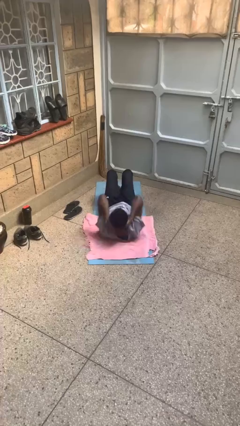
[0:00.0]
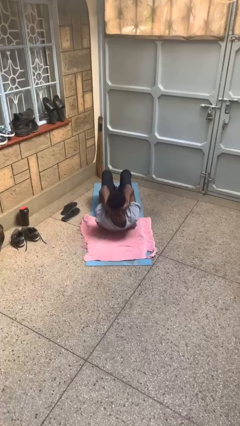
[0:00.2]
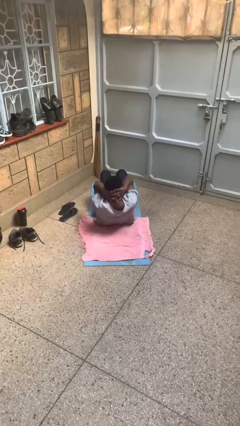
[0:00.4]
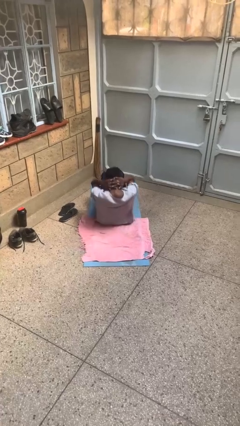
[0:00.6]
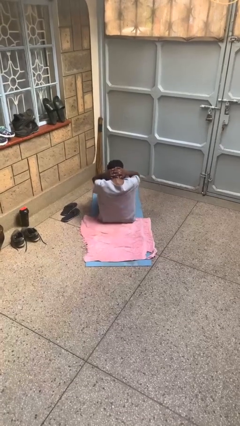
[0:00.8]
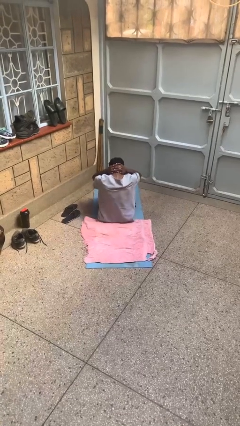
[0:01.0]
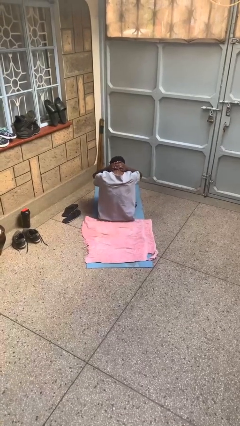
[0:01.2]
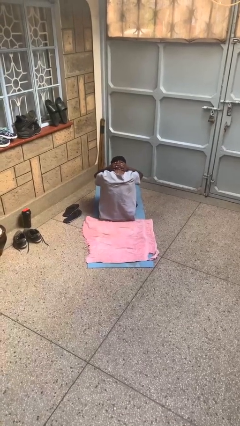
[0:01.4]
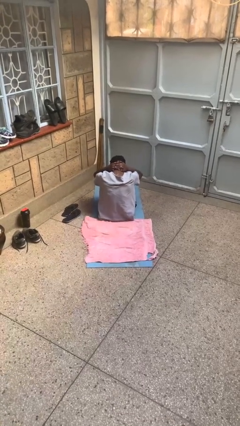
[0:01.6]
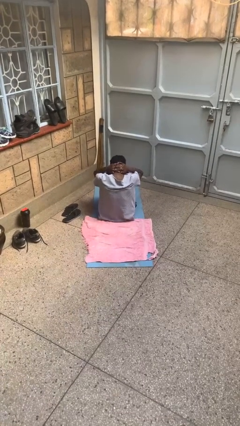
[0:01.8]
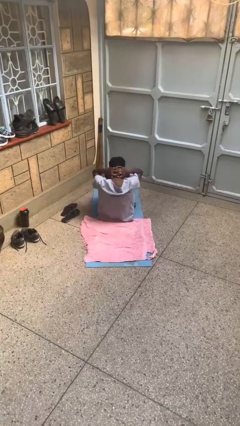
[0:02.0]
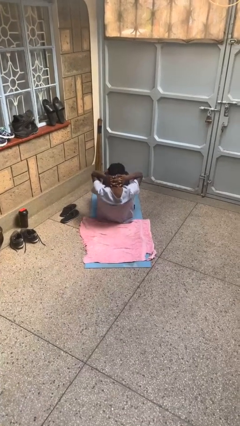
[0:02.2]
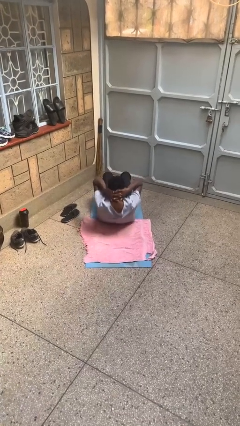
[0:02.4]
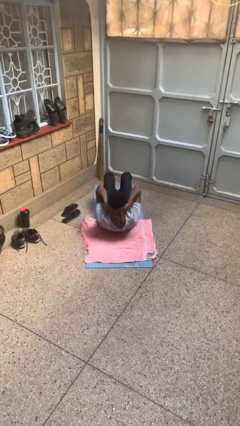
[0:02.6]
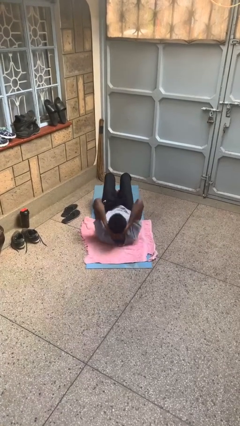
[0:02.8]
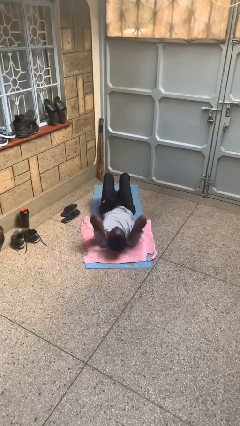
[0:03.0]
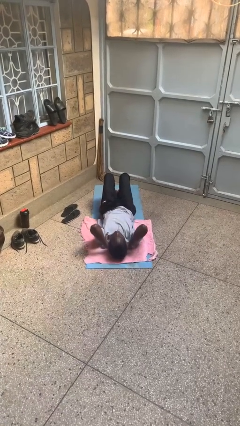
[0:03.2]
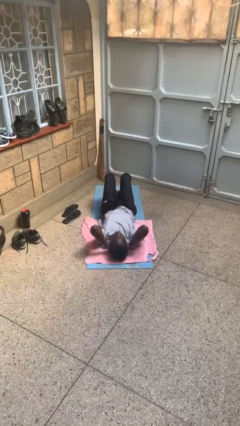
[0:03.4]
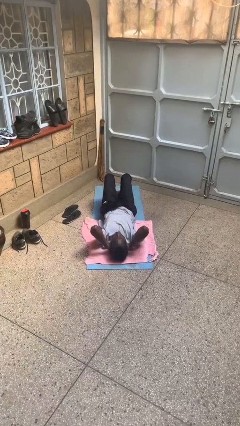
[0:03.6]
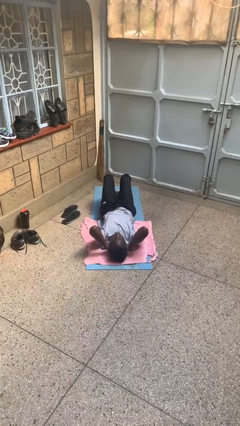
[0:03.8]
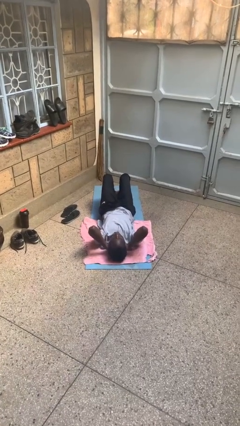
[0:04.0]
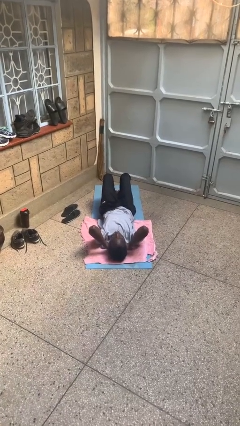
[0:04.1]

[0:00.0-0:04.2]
person exercises with situp

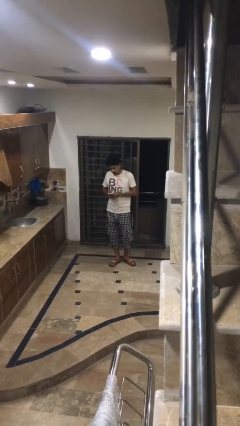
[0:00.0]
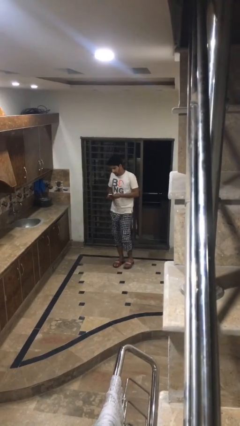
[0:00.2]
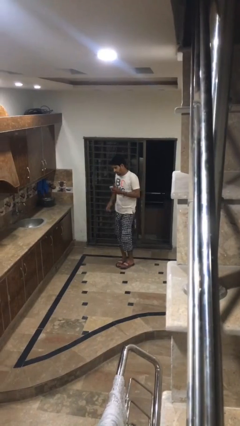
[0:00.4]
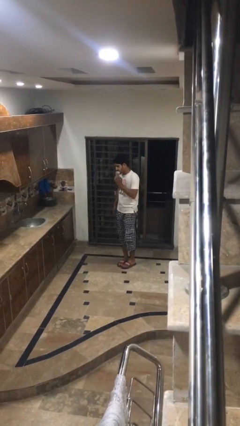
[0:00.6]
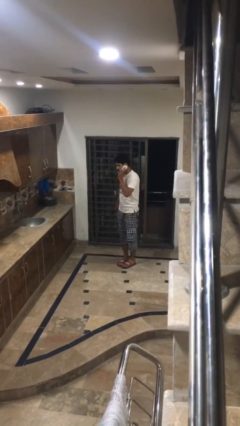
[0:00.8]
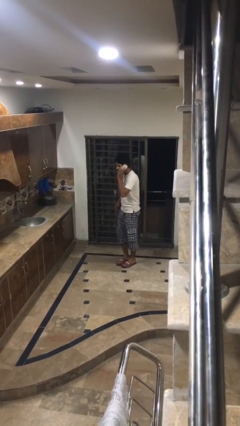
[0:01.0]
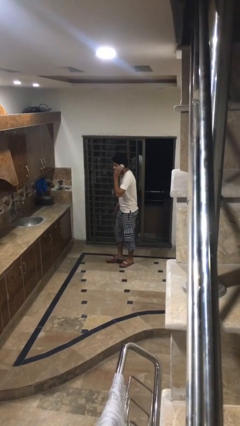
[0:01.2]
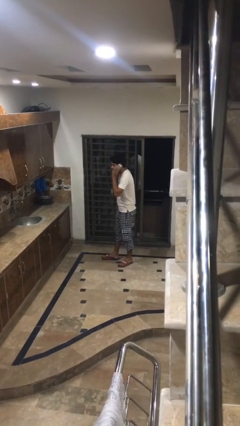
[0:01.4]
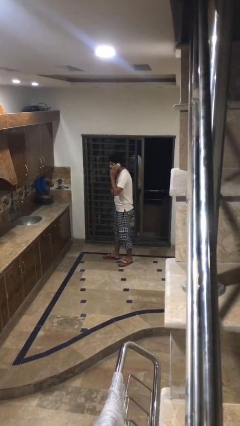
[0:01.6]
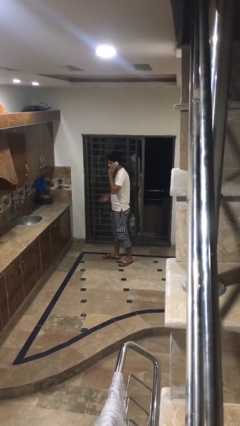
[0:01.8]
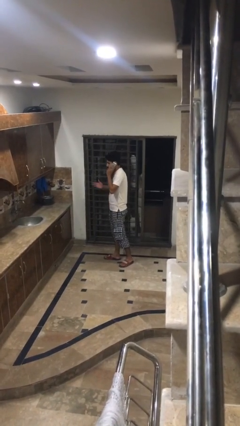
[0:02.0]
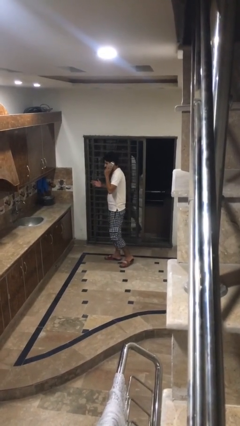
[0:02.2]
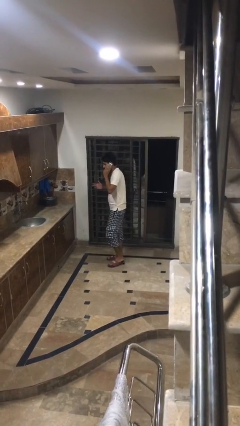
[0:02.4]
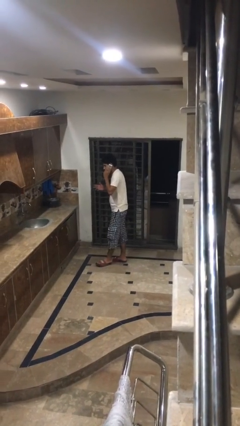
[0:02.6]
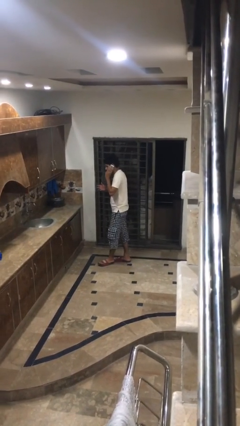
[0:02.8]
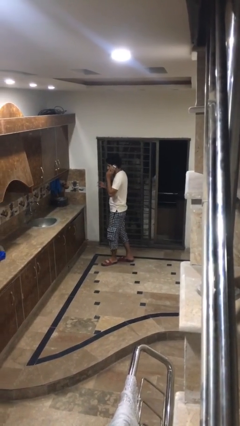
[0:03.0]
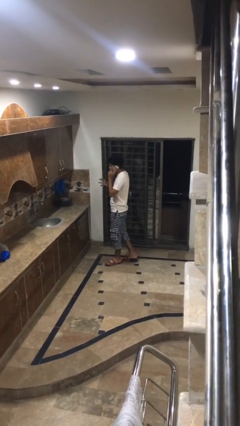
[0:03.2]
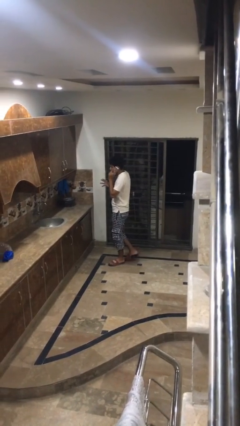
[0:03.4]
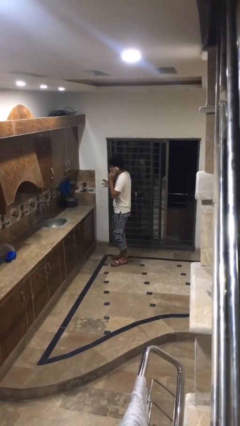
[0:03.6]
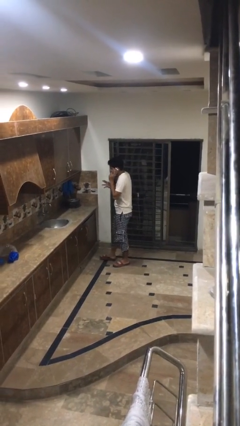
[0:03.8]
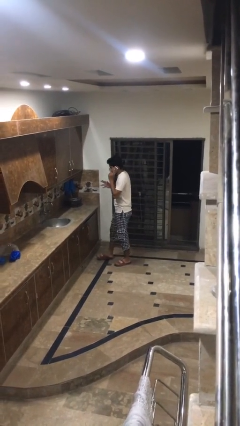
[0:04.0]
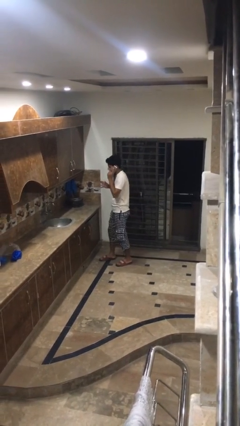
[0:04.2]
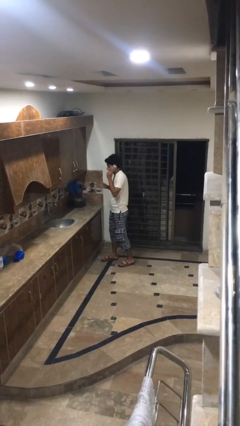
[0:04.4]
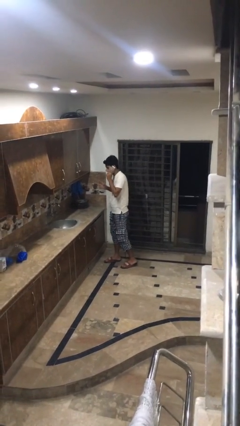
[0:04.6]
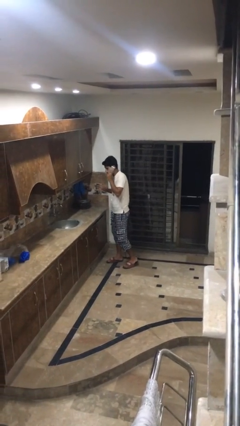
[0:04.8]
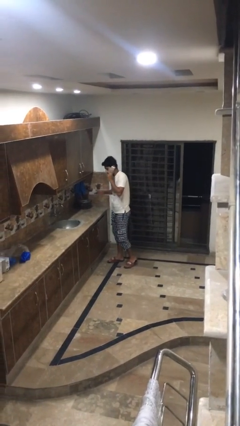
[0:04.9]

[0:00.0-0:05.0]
person talks on phone

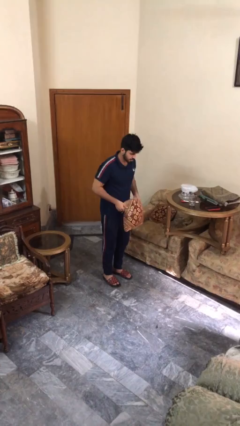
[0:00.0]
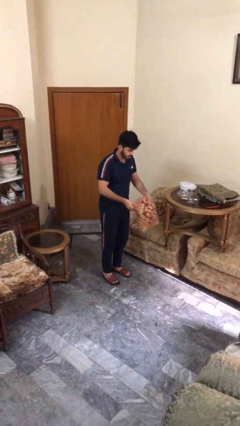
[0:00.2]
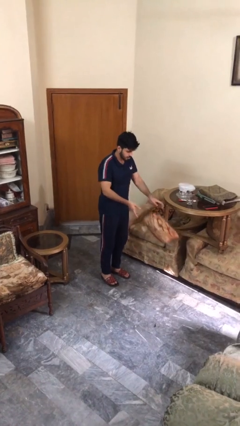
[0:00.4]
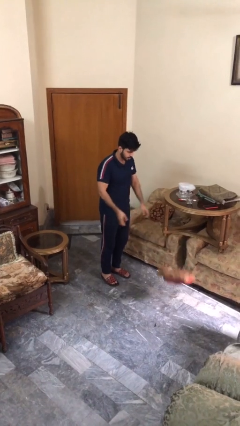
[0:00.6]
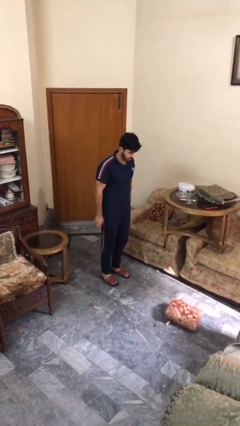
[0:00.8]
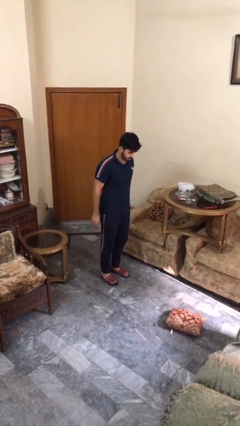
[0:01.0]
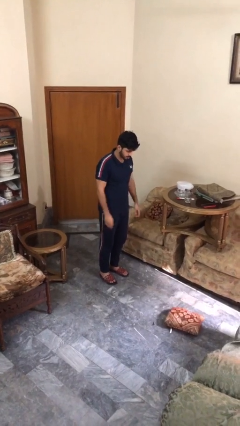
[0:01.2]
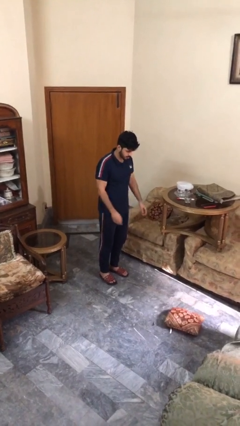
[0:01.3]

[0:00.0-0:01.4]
person throws object to ground

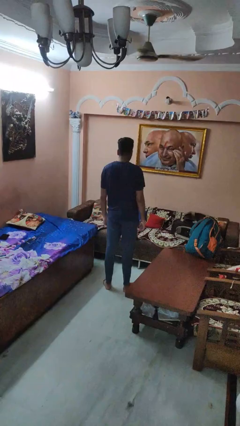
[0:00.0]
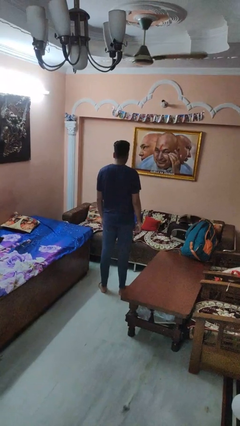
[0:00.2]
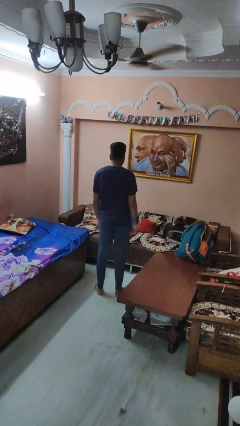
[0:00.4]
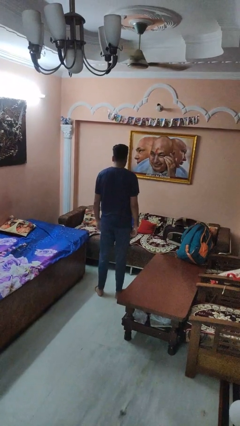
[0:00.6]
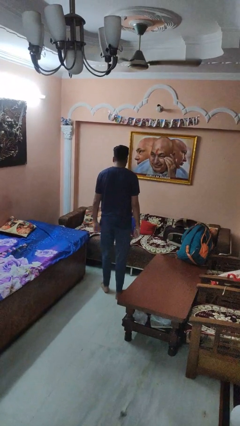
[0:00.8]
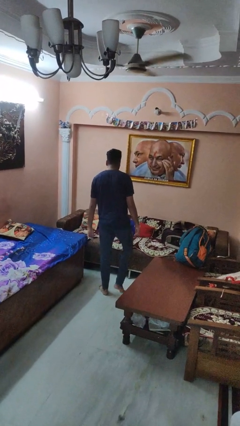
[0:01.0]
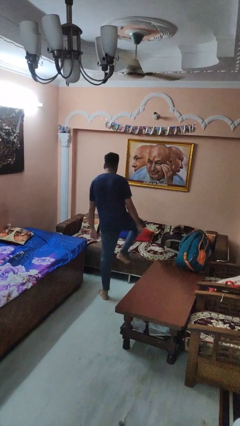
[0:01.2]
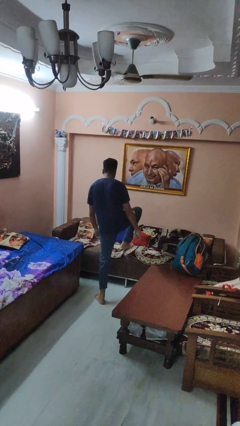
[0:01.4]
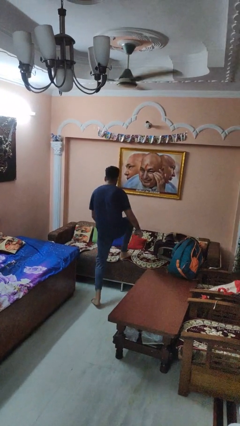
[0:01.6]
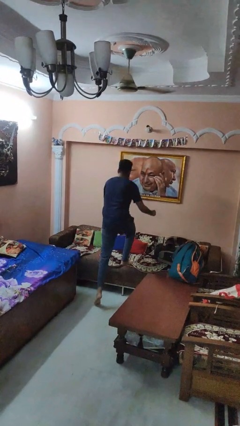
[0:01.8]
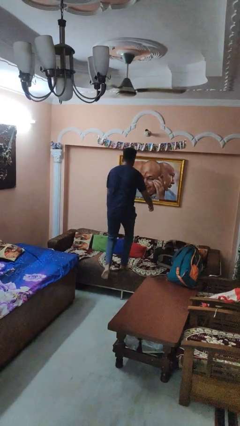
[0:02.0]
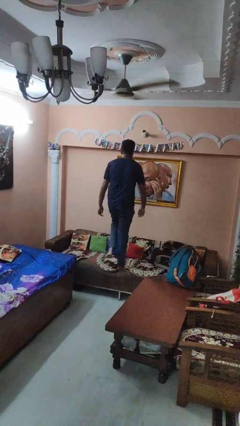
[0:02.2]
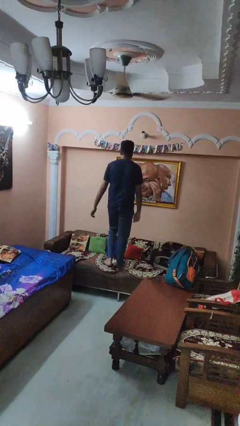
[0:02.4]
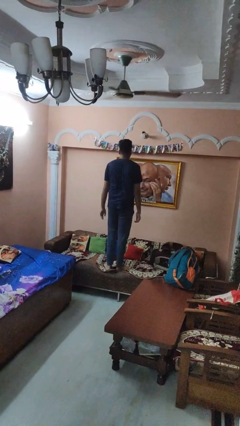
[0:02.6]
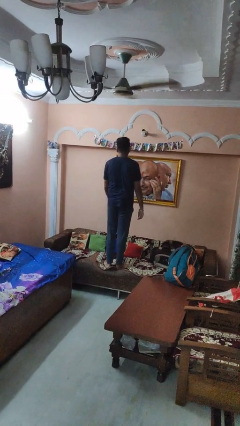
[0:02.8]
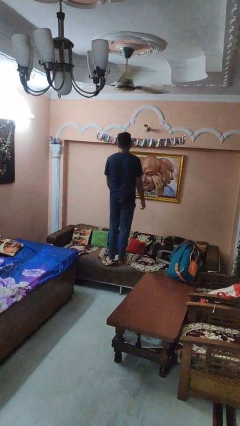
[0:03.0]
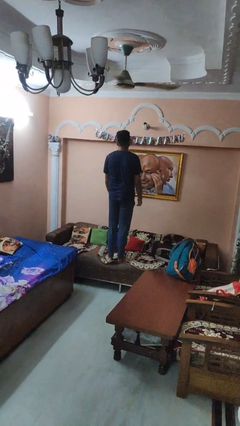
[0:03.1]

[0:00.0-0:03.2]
person climbs on couch

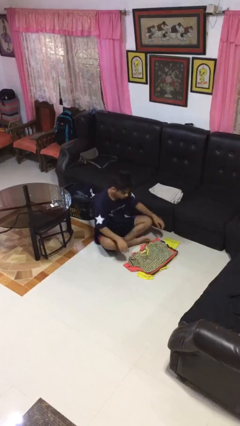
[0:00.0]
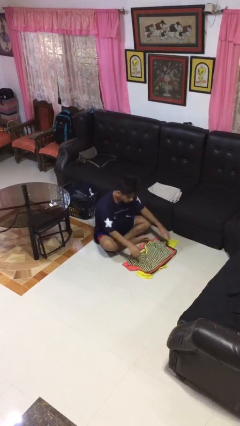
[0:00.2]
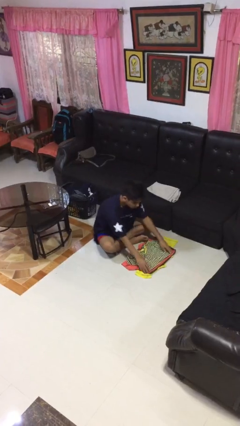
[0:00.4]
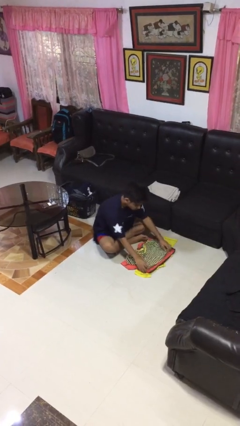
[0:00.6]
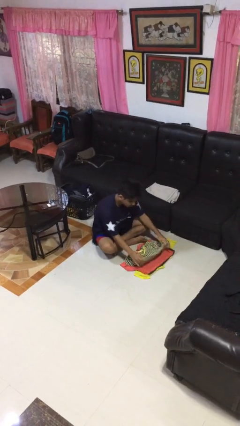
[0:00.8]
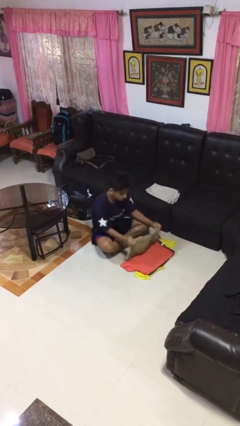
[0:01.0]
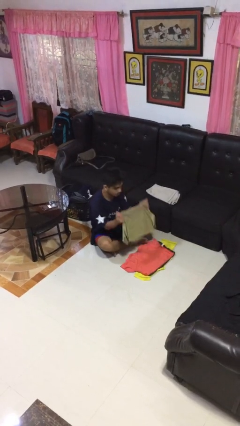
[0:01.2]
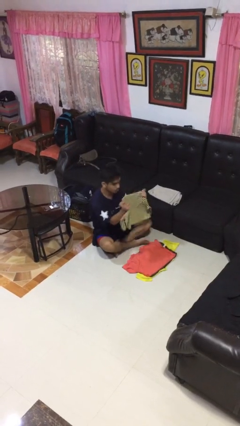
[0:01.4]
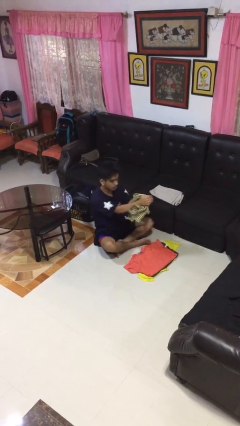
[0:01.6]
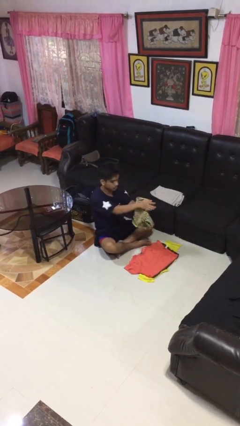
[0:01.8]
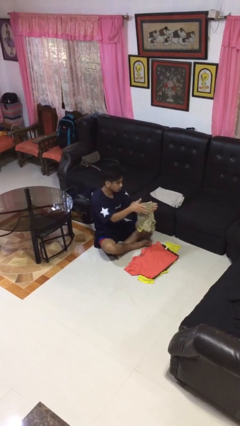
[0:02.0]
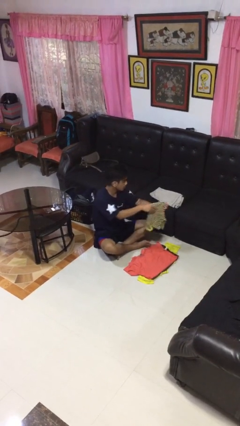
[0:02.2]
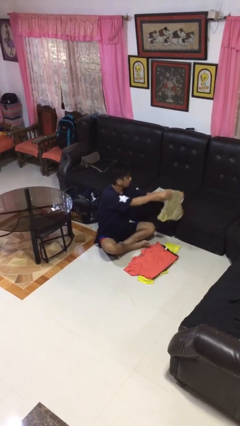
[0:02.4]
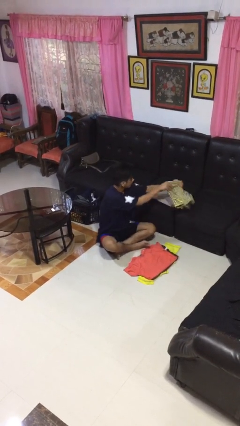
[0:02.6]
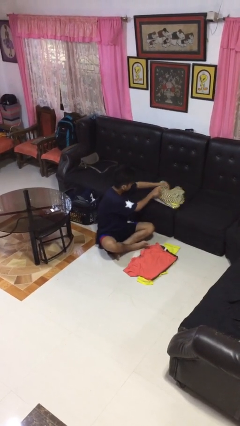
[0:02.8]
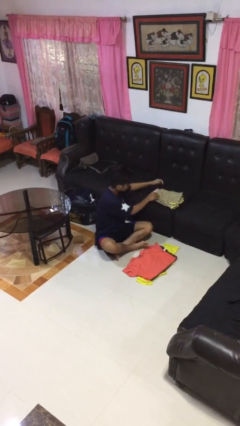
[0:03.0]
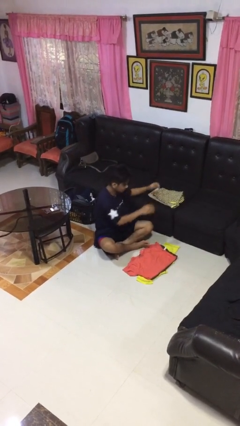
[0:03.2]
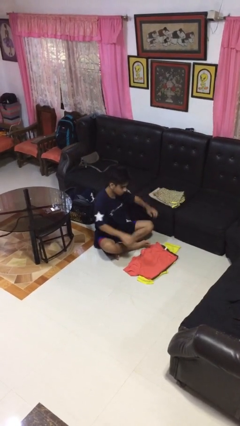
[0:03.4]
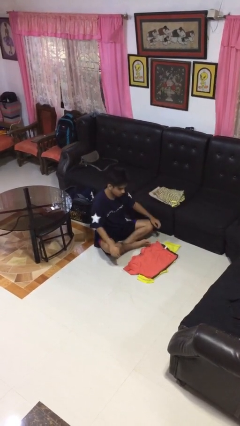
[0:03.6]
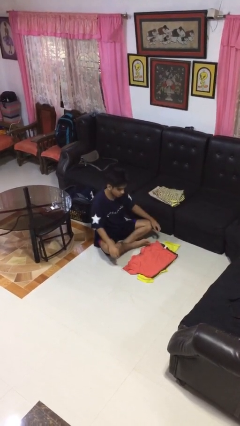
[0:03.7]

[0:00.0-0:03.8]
person folds shirt
